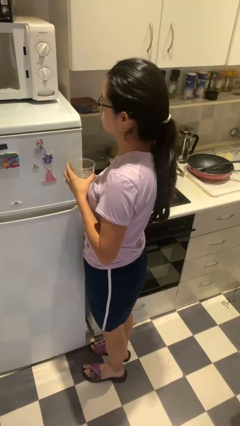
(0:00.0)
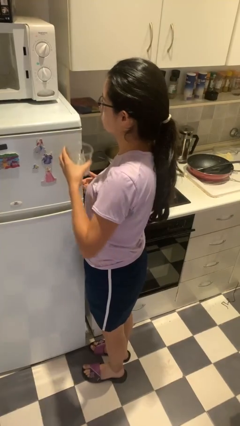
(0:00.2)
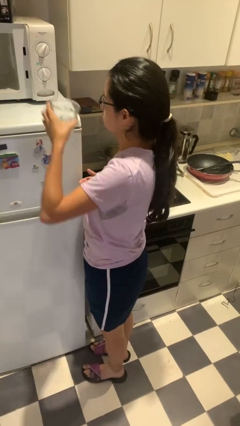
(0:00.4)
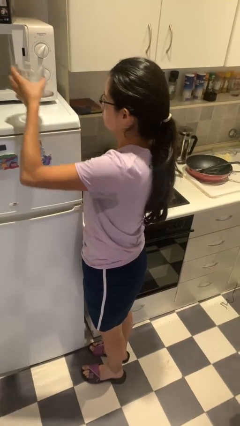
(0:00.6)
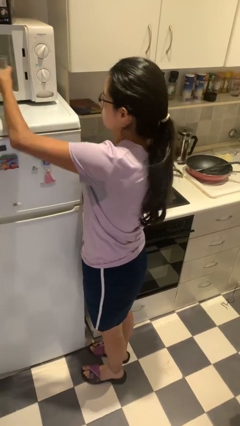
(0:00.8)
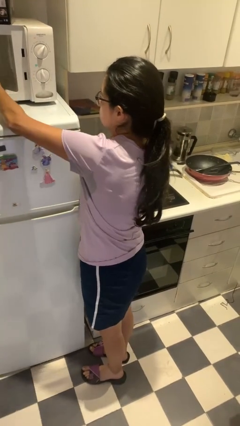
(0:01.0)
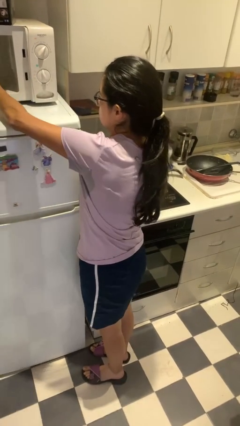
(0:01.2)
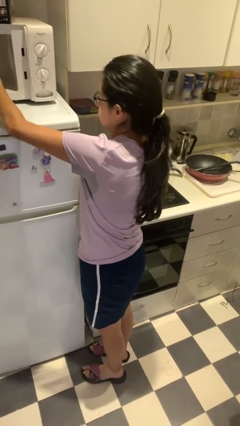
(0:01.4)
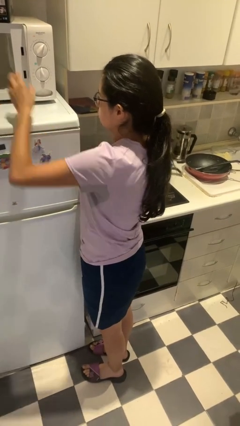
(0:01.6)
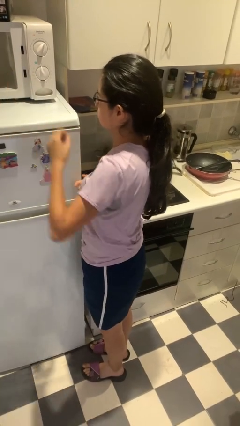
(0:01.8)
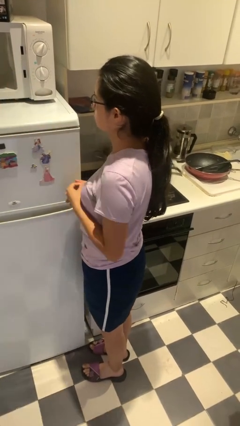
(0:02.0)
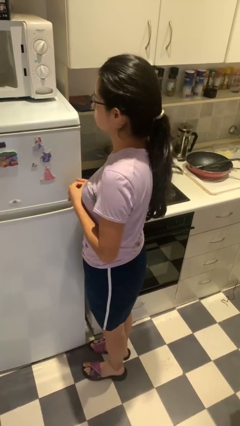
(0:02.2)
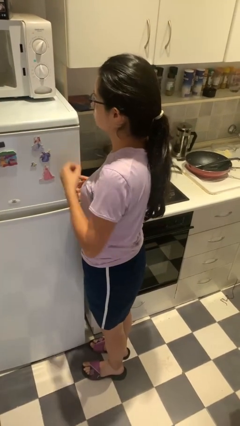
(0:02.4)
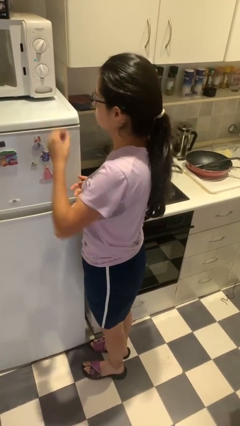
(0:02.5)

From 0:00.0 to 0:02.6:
person puts object into microwave

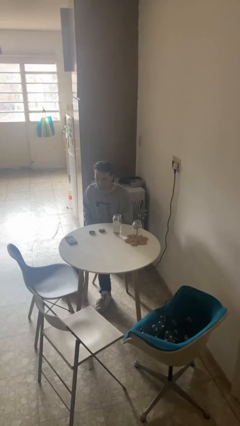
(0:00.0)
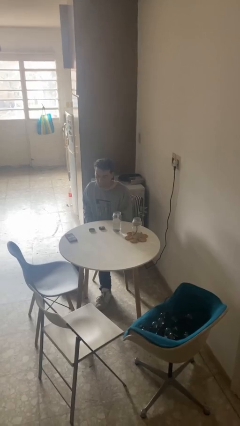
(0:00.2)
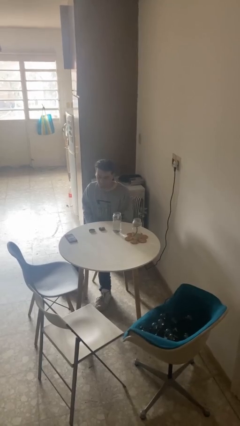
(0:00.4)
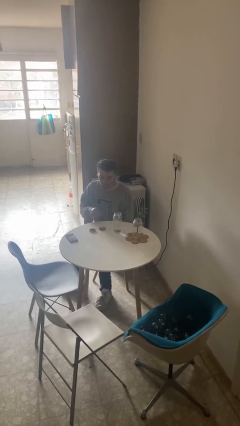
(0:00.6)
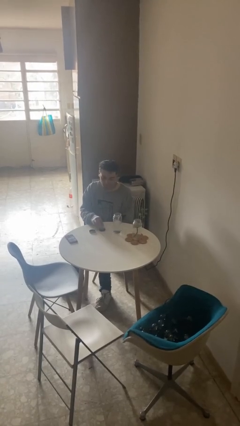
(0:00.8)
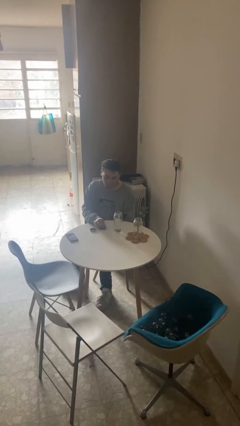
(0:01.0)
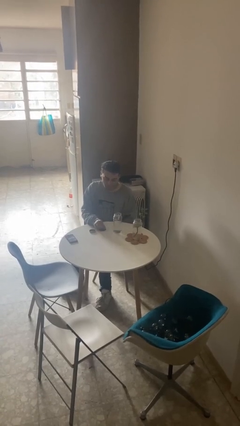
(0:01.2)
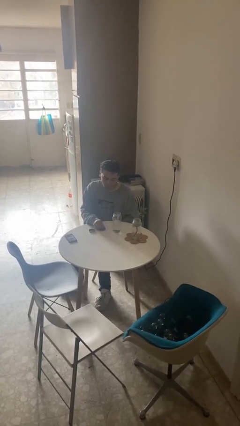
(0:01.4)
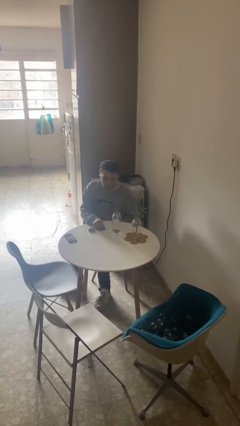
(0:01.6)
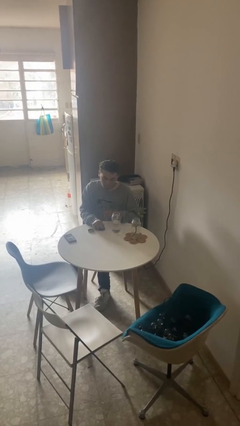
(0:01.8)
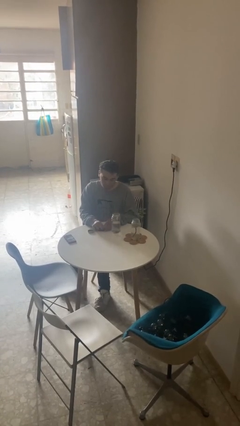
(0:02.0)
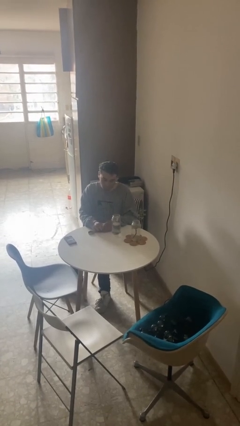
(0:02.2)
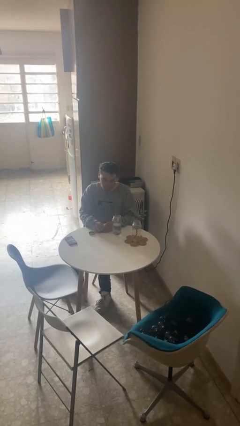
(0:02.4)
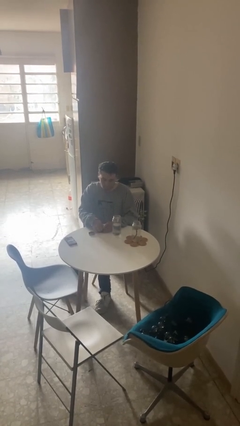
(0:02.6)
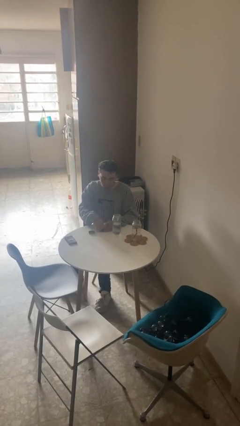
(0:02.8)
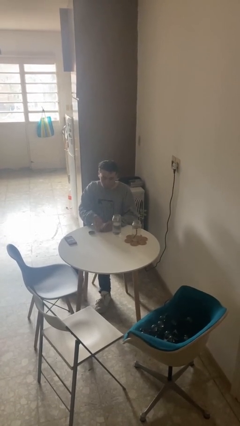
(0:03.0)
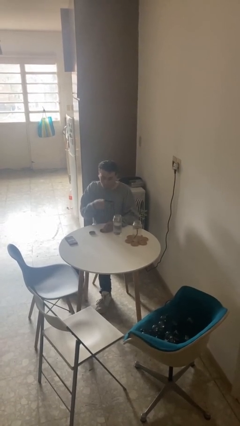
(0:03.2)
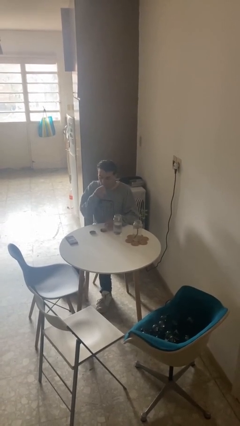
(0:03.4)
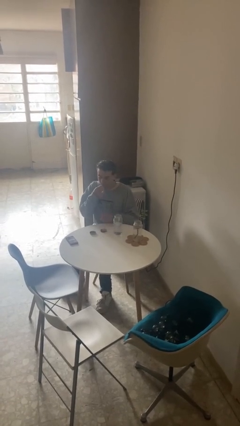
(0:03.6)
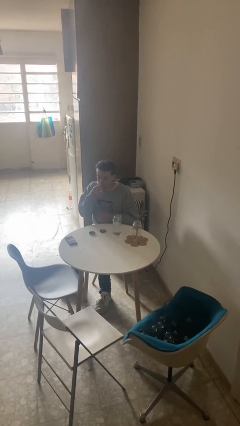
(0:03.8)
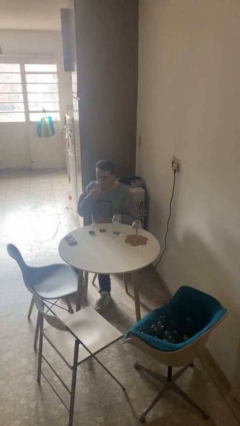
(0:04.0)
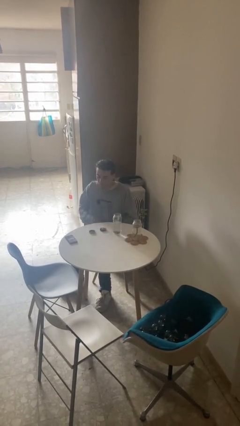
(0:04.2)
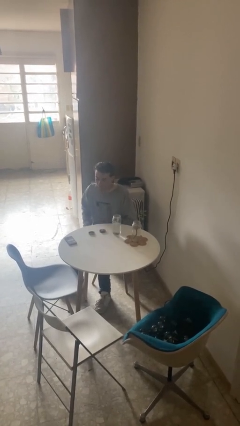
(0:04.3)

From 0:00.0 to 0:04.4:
person takes medicine pills

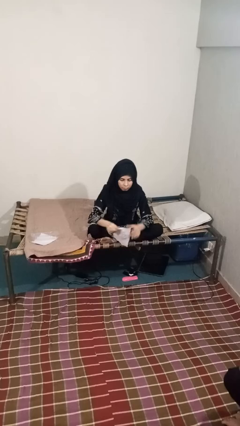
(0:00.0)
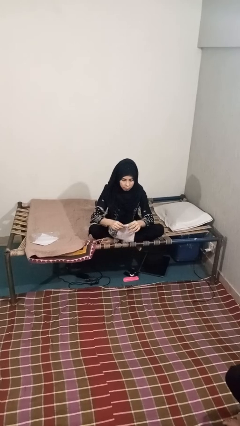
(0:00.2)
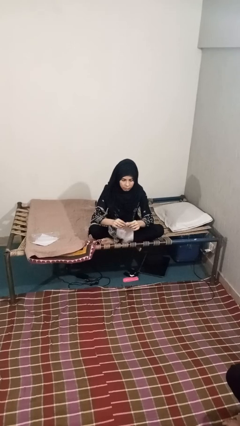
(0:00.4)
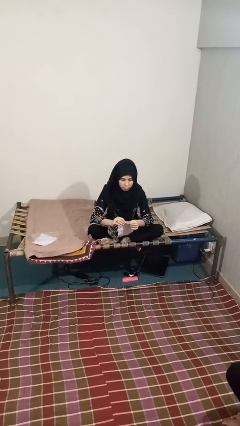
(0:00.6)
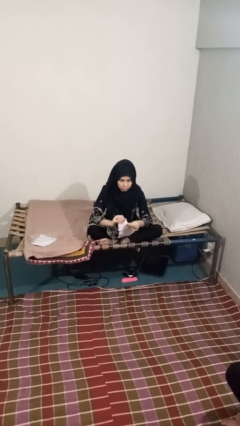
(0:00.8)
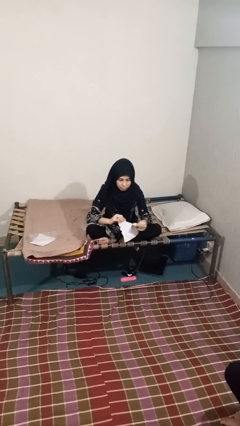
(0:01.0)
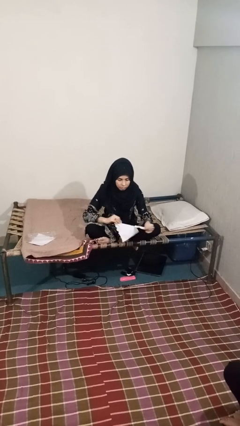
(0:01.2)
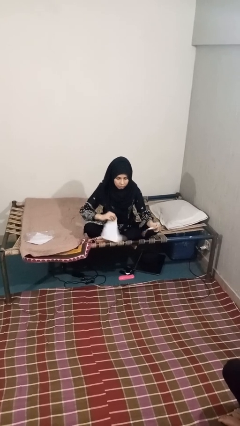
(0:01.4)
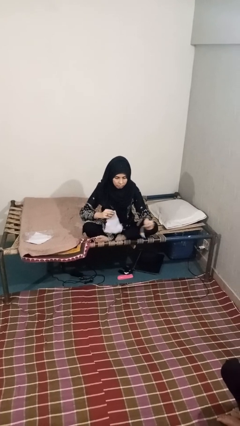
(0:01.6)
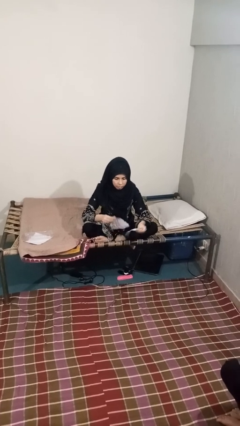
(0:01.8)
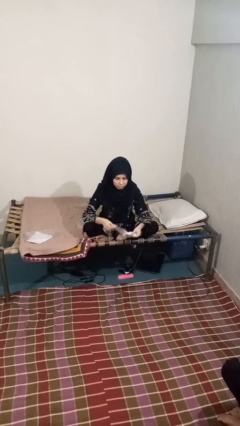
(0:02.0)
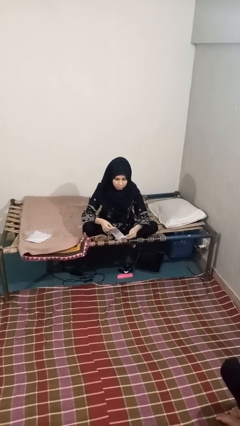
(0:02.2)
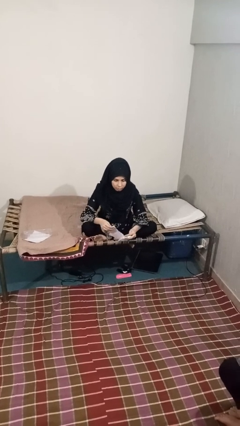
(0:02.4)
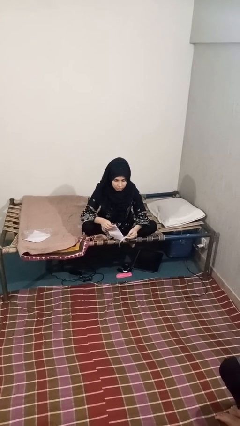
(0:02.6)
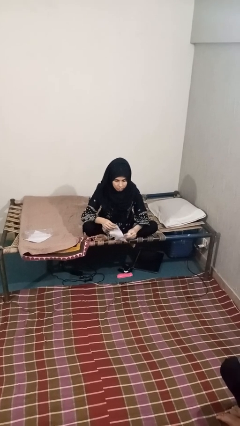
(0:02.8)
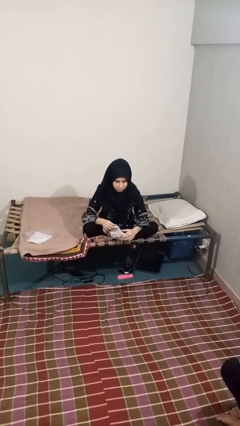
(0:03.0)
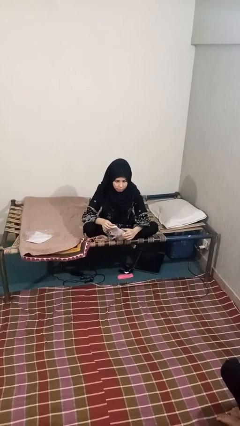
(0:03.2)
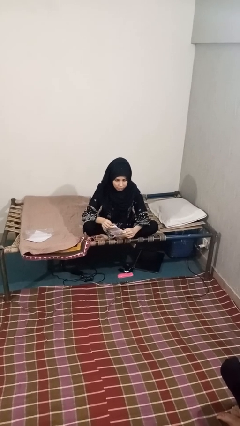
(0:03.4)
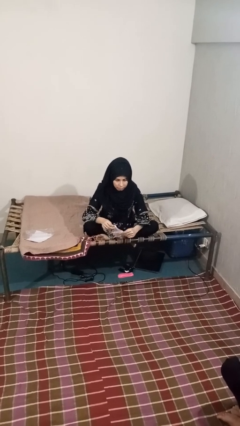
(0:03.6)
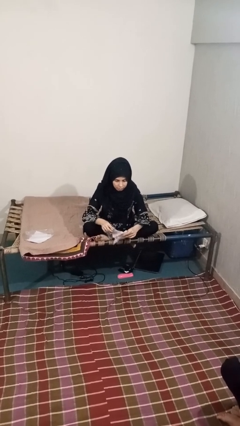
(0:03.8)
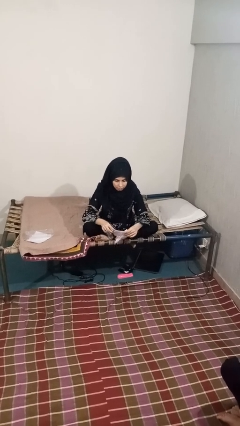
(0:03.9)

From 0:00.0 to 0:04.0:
person tears paper

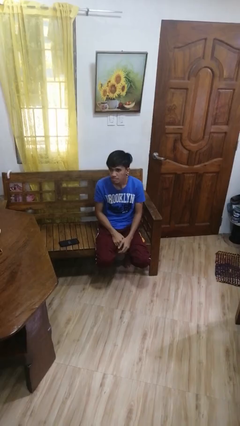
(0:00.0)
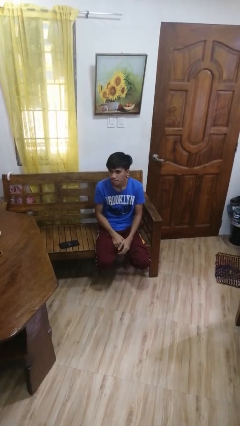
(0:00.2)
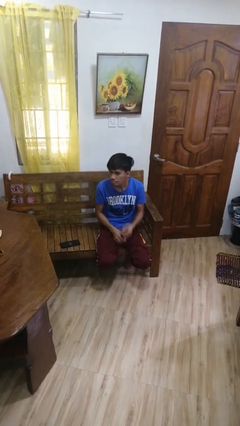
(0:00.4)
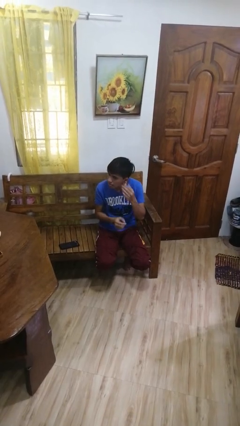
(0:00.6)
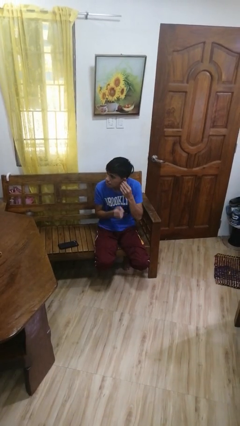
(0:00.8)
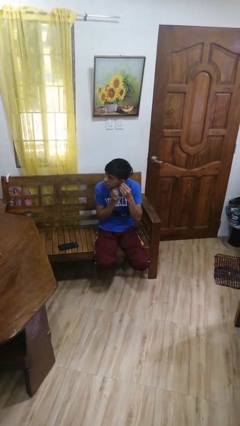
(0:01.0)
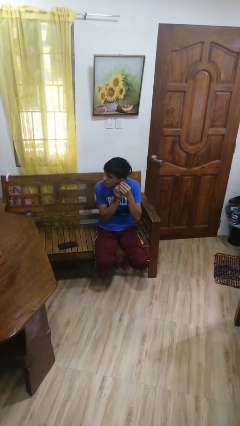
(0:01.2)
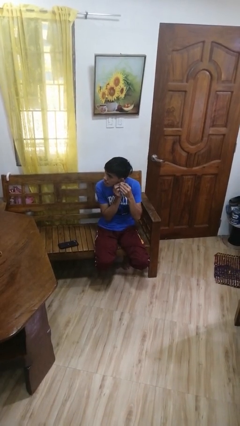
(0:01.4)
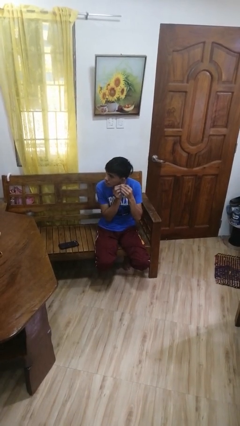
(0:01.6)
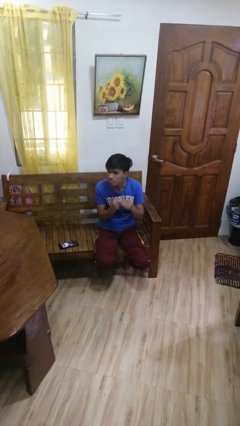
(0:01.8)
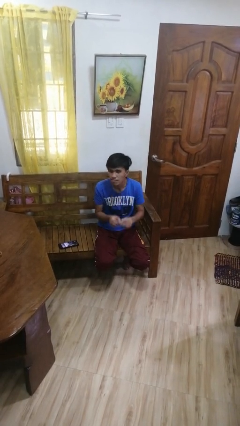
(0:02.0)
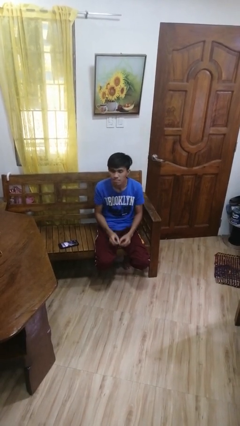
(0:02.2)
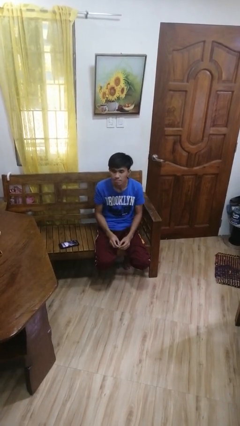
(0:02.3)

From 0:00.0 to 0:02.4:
person takes off earrings

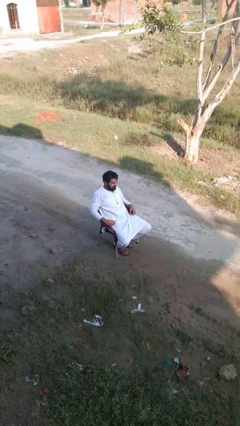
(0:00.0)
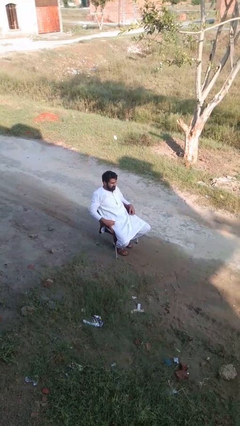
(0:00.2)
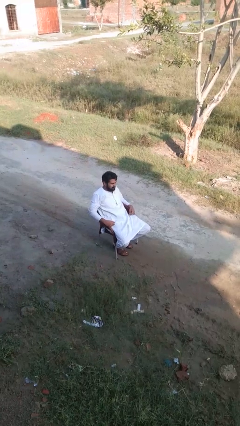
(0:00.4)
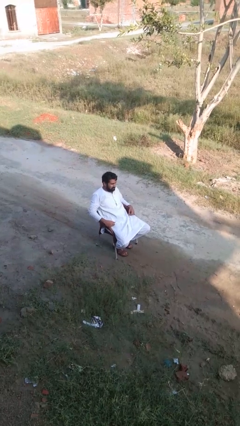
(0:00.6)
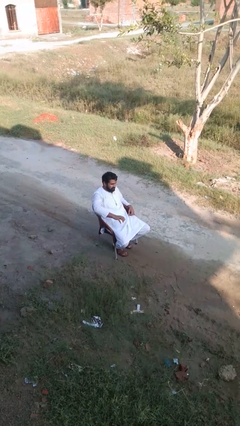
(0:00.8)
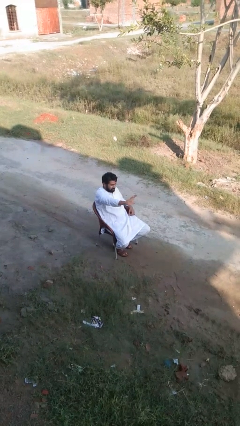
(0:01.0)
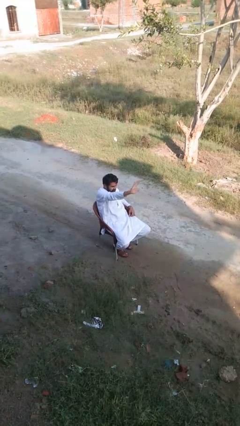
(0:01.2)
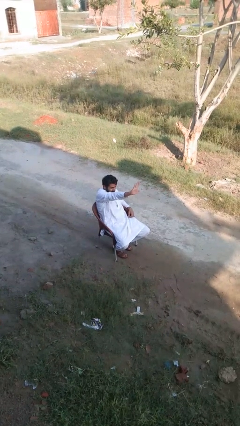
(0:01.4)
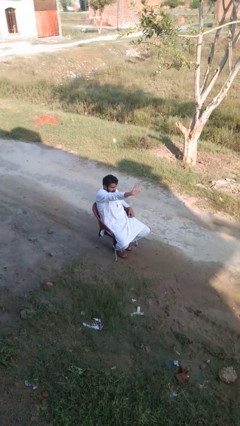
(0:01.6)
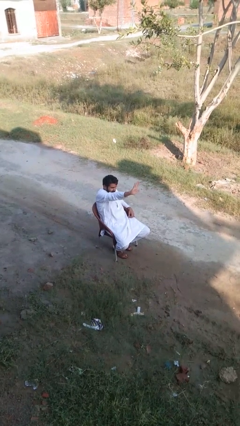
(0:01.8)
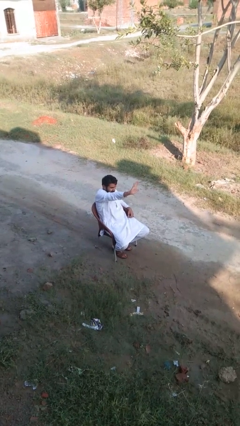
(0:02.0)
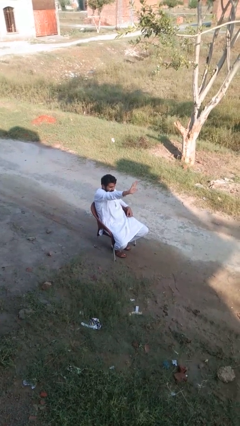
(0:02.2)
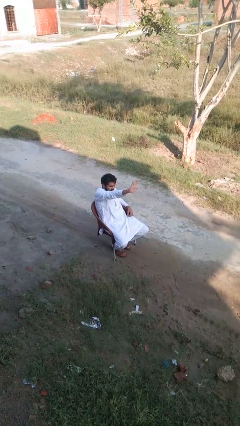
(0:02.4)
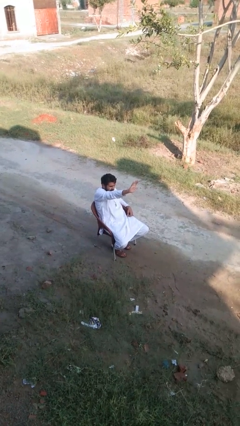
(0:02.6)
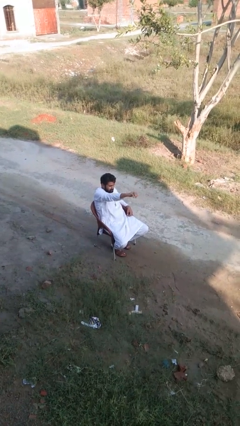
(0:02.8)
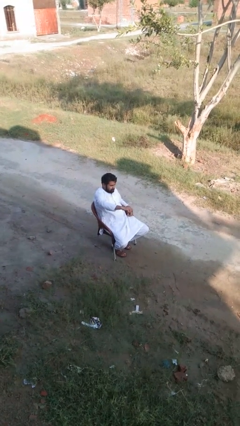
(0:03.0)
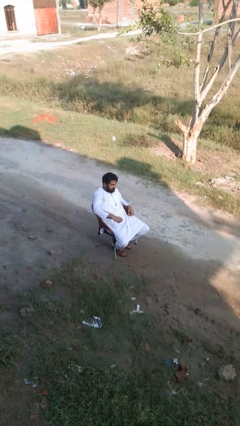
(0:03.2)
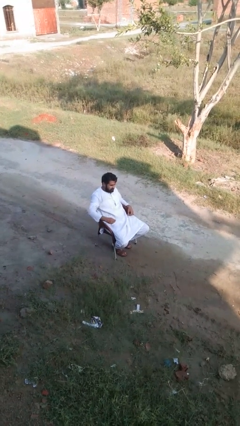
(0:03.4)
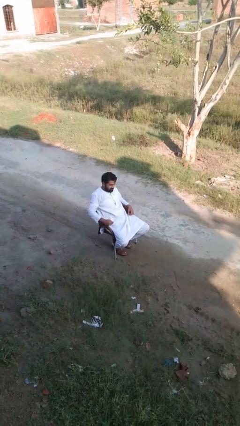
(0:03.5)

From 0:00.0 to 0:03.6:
person gestures stop

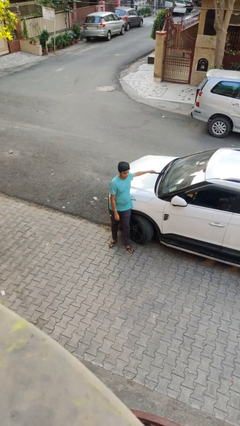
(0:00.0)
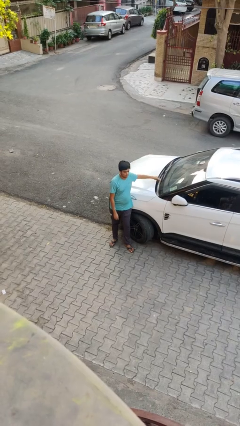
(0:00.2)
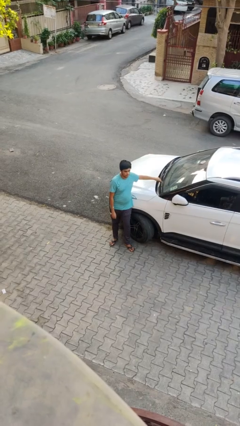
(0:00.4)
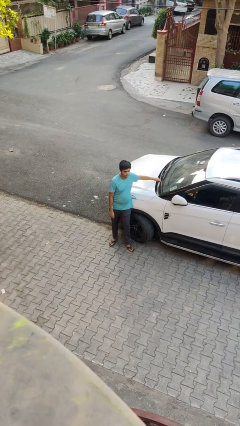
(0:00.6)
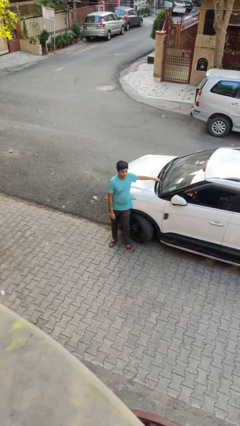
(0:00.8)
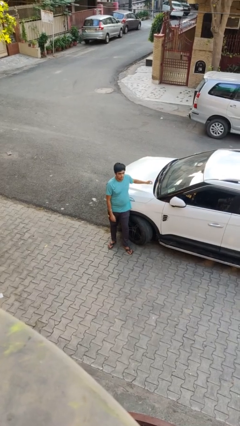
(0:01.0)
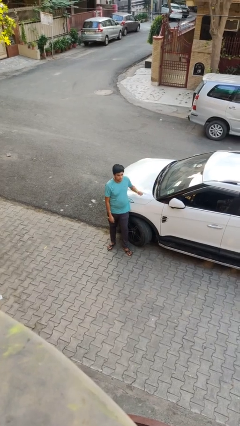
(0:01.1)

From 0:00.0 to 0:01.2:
person flips down car wipers
